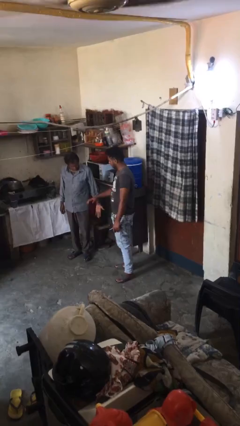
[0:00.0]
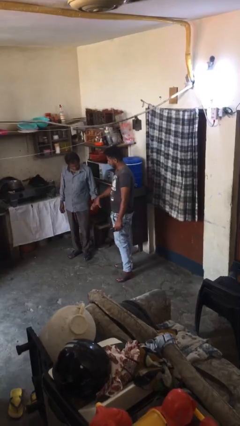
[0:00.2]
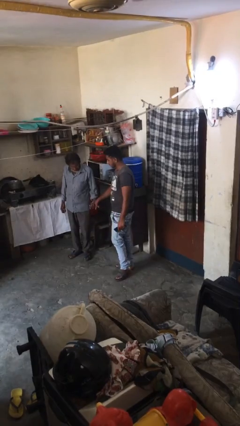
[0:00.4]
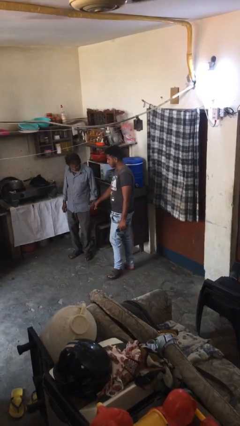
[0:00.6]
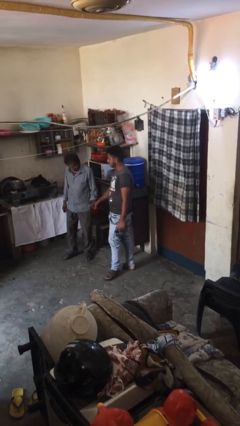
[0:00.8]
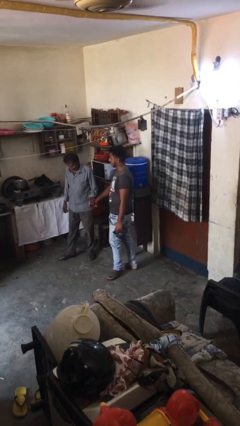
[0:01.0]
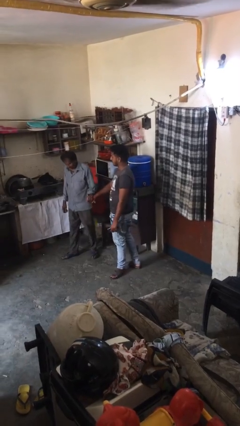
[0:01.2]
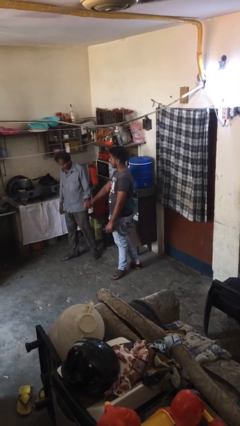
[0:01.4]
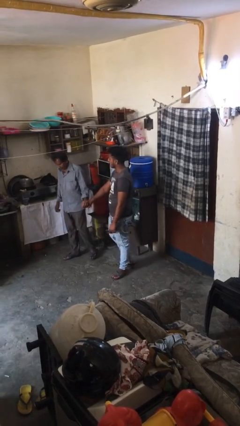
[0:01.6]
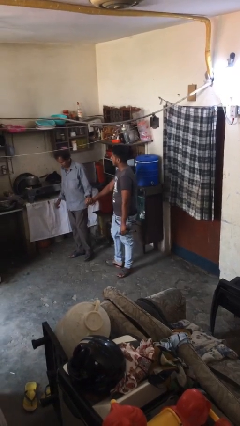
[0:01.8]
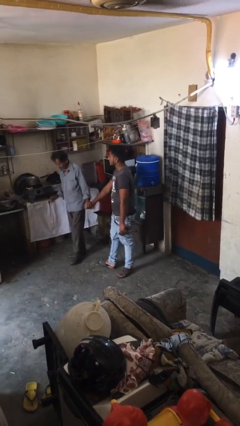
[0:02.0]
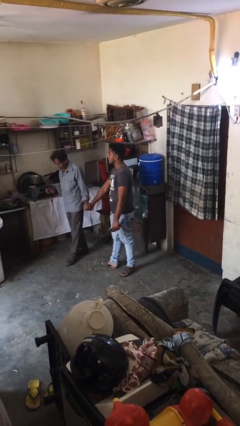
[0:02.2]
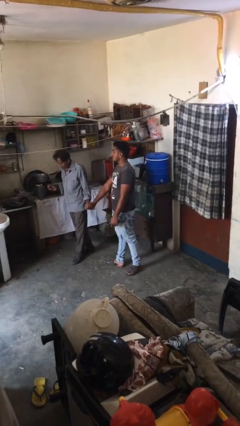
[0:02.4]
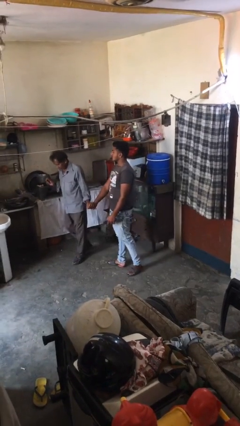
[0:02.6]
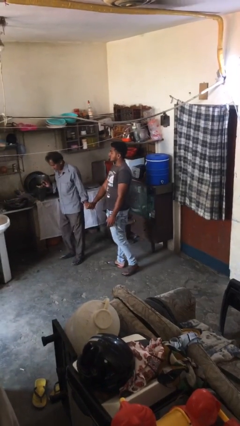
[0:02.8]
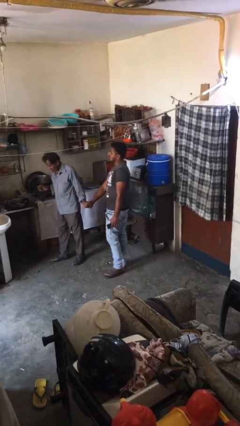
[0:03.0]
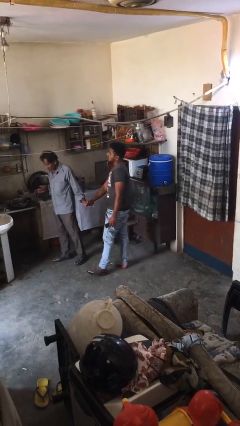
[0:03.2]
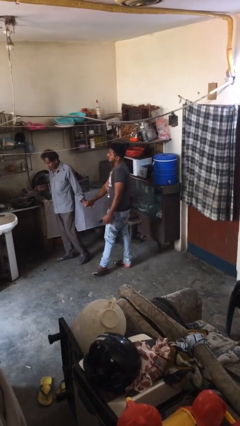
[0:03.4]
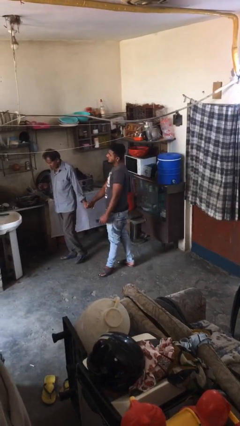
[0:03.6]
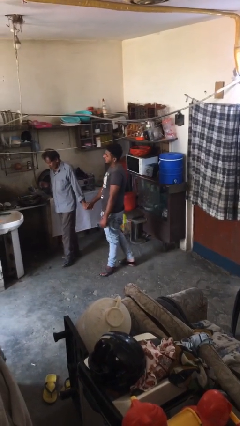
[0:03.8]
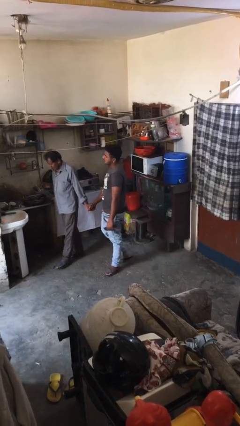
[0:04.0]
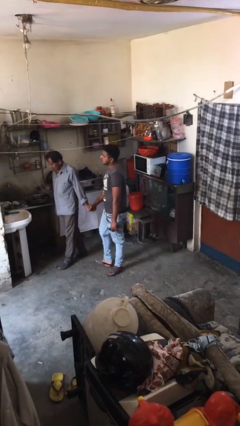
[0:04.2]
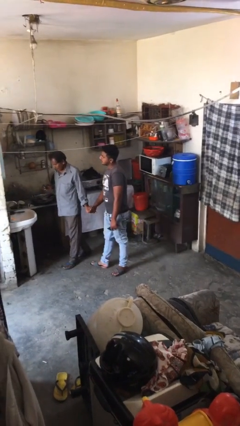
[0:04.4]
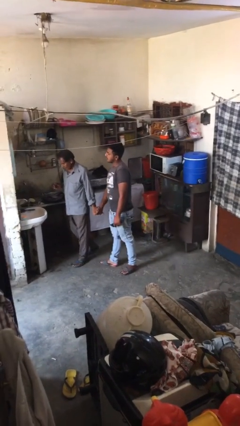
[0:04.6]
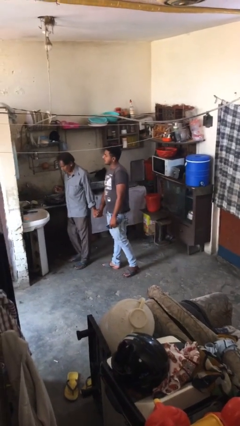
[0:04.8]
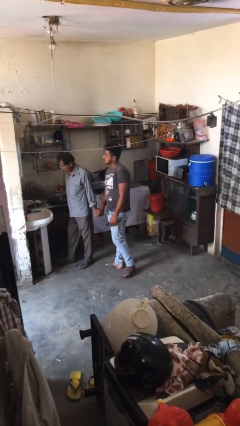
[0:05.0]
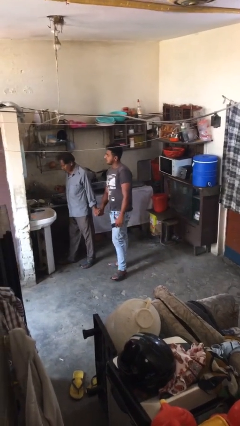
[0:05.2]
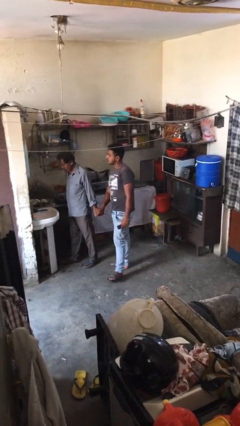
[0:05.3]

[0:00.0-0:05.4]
person holds hand

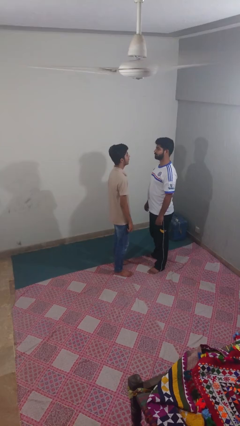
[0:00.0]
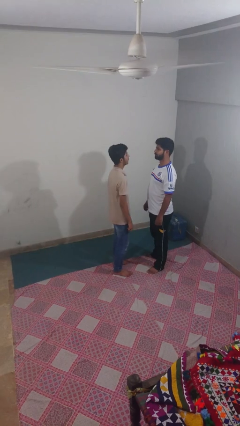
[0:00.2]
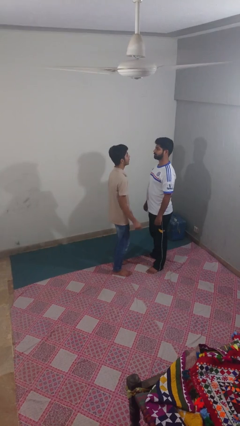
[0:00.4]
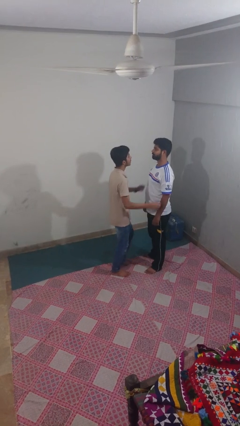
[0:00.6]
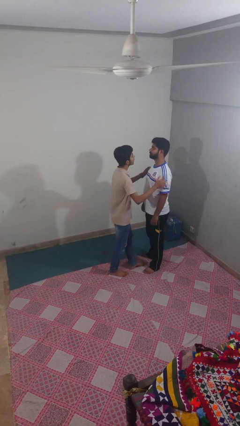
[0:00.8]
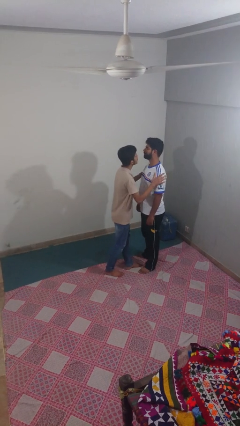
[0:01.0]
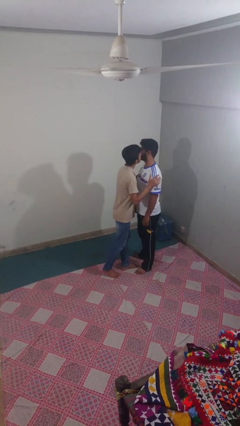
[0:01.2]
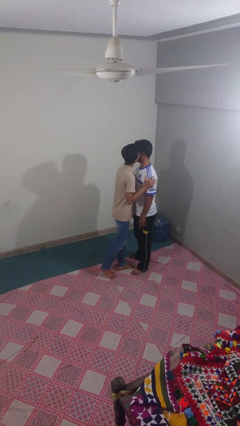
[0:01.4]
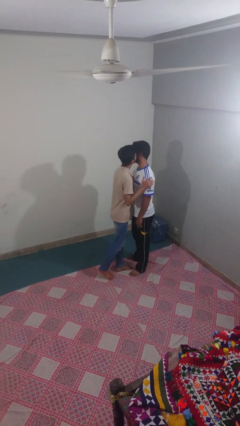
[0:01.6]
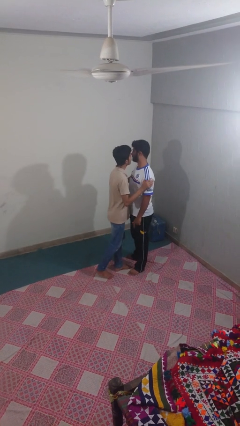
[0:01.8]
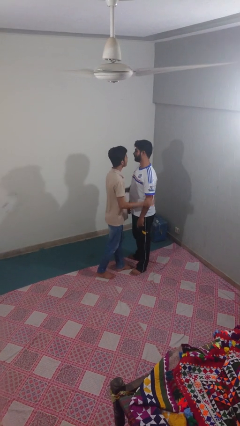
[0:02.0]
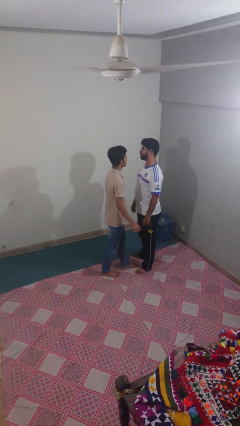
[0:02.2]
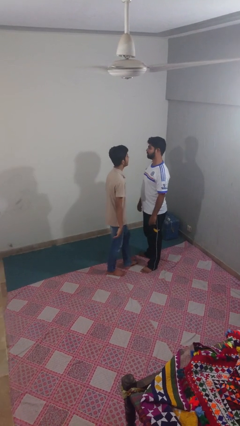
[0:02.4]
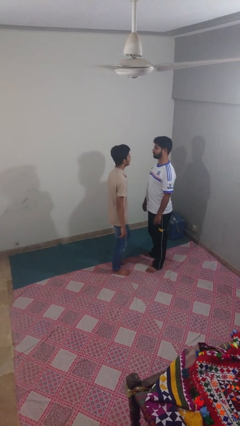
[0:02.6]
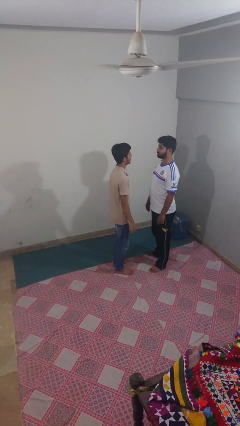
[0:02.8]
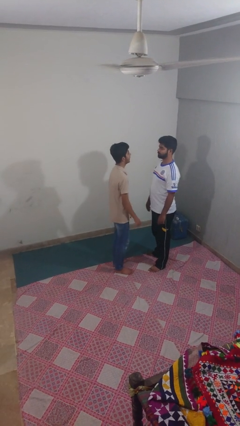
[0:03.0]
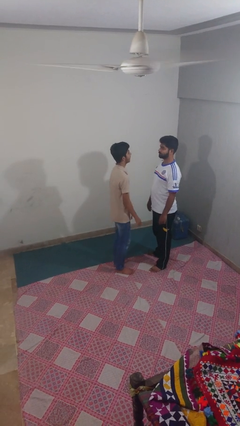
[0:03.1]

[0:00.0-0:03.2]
person kisses cheek of person

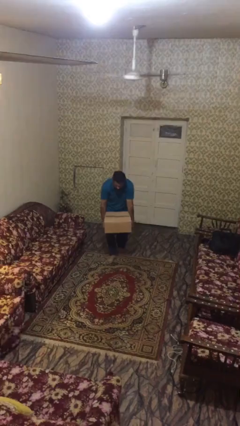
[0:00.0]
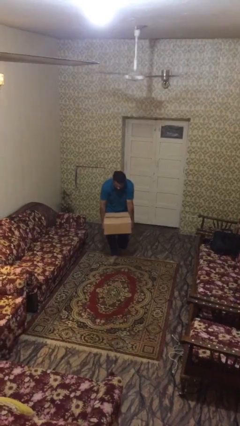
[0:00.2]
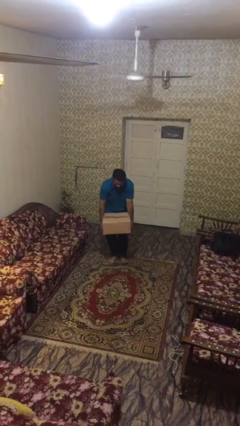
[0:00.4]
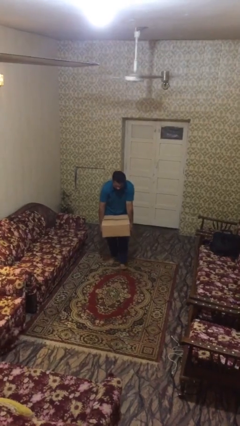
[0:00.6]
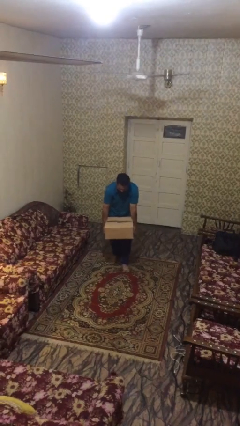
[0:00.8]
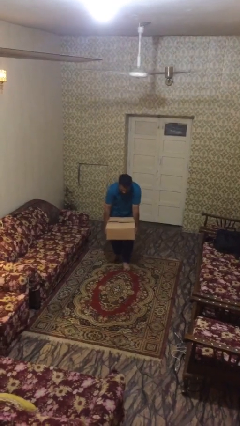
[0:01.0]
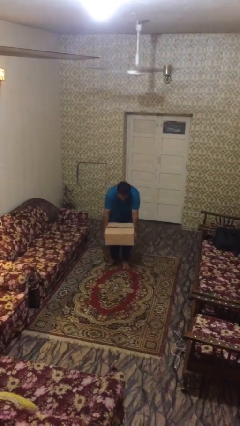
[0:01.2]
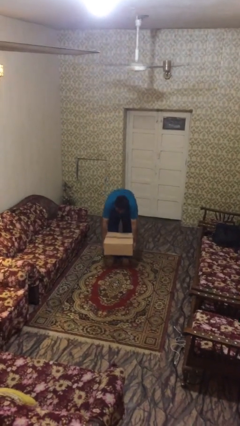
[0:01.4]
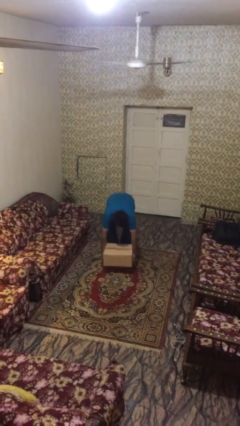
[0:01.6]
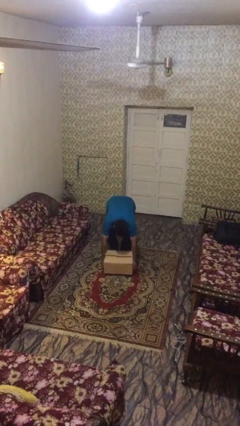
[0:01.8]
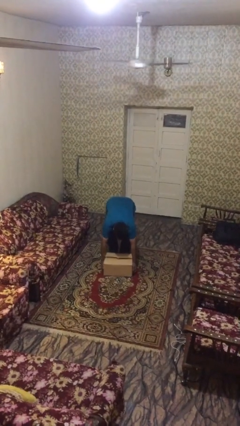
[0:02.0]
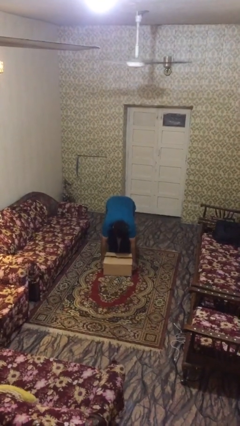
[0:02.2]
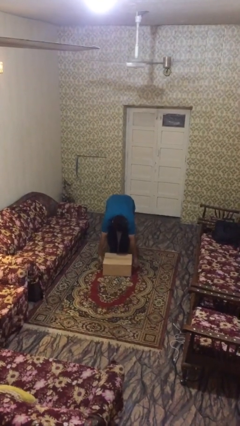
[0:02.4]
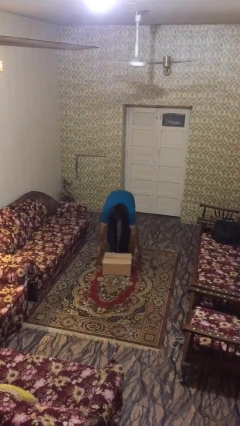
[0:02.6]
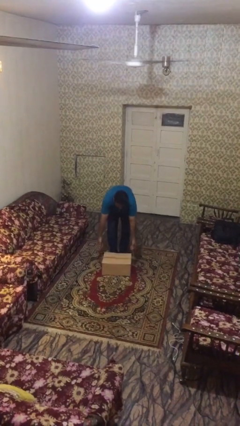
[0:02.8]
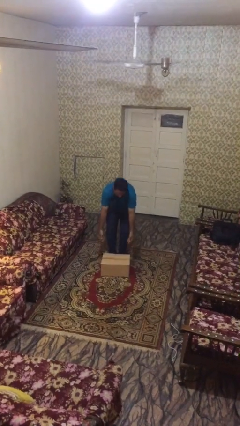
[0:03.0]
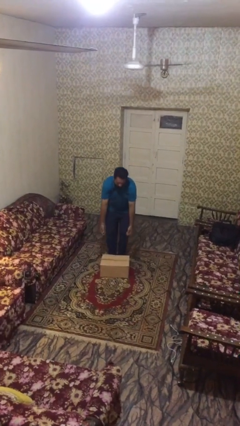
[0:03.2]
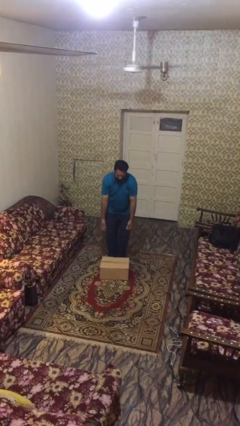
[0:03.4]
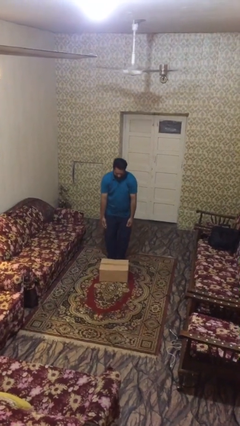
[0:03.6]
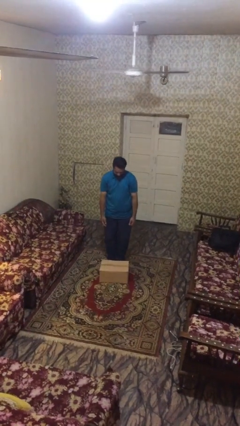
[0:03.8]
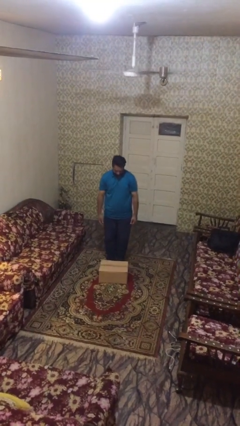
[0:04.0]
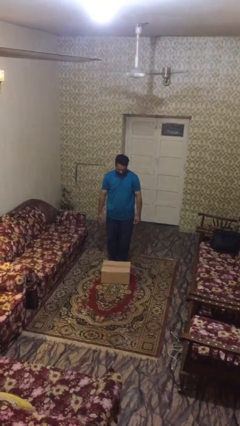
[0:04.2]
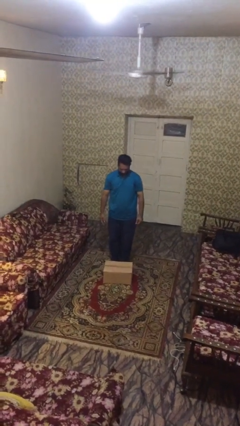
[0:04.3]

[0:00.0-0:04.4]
person puts down object on floor

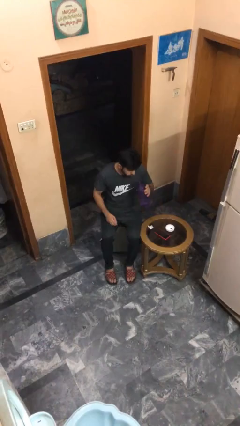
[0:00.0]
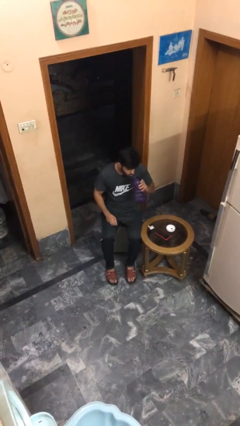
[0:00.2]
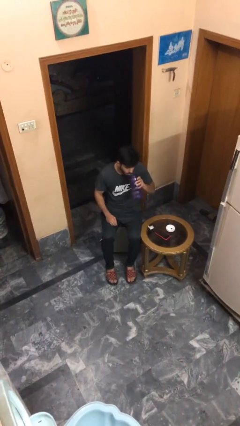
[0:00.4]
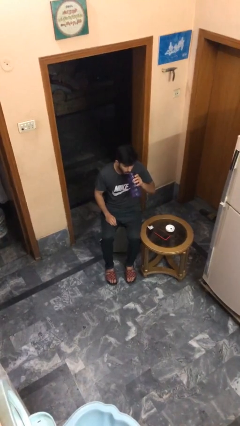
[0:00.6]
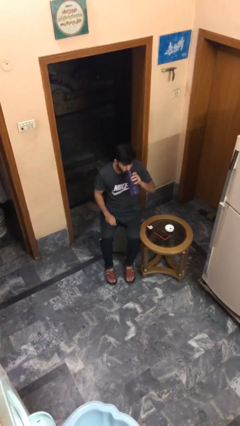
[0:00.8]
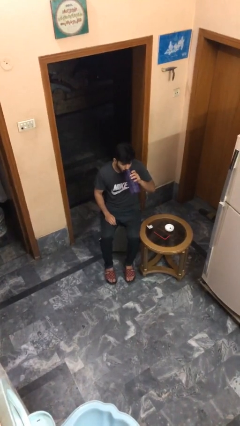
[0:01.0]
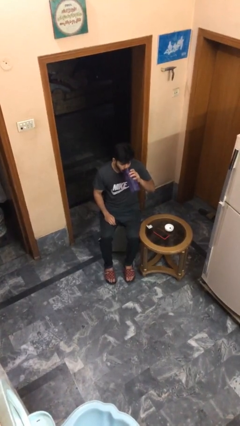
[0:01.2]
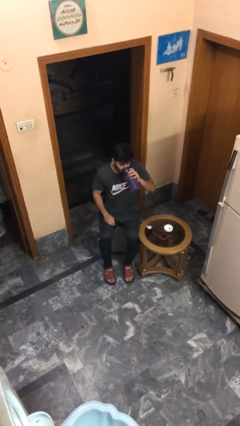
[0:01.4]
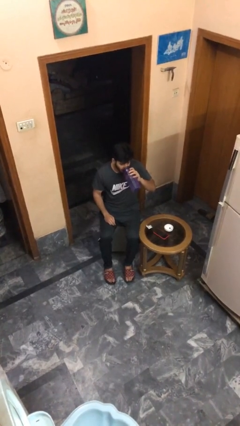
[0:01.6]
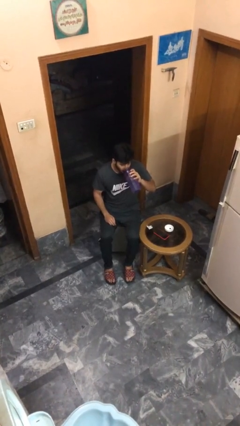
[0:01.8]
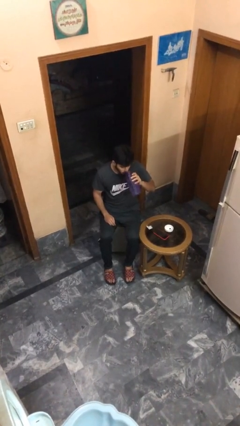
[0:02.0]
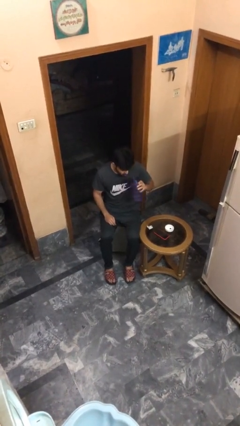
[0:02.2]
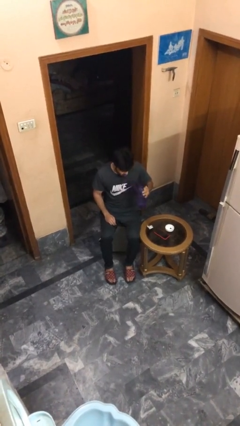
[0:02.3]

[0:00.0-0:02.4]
person drinks from cup

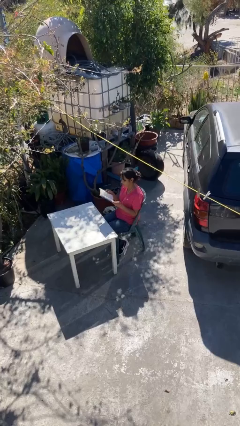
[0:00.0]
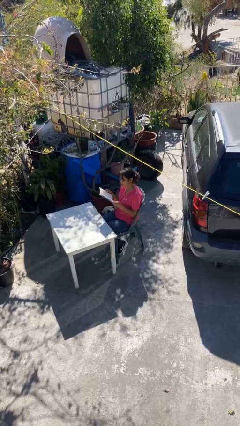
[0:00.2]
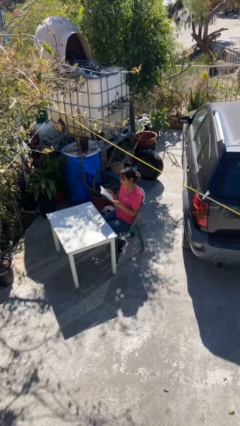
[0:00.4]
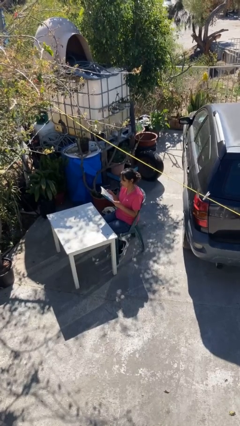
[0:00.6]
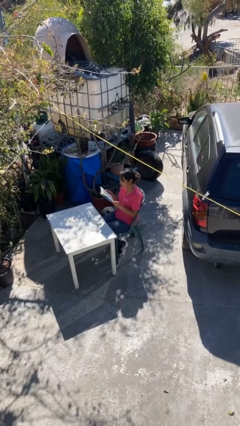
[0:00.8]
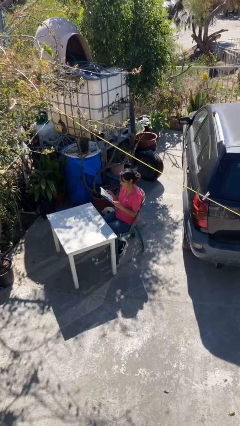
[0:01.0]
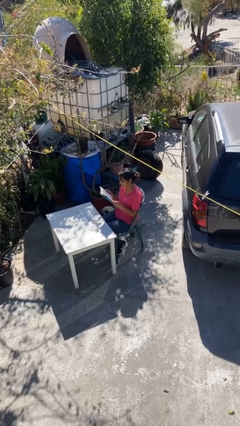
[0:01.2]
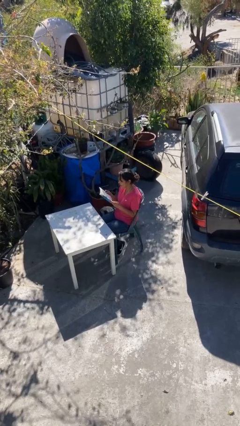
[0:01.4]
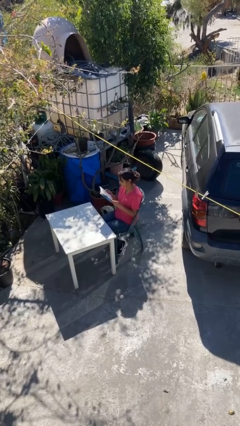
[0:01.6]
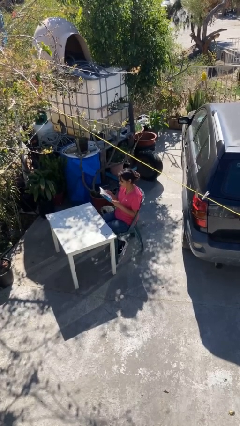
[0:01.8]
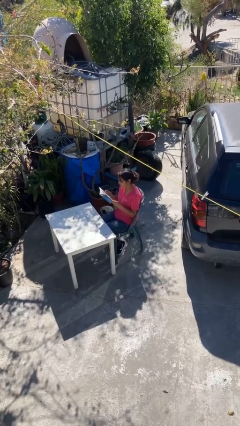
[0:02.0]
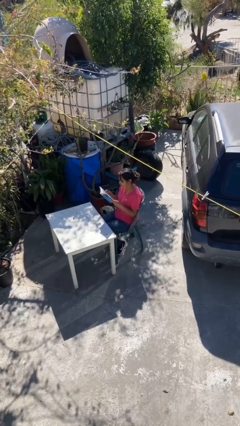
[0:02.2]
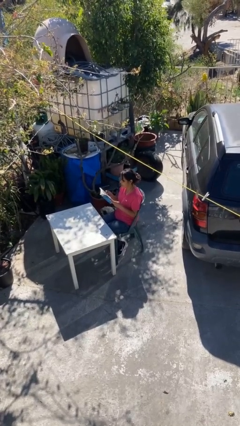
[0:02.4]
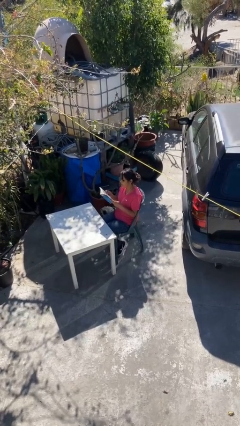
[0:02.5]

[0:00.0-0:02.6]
person reads document
